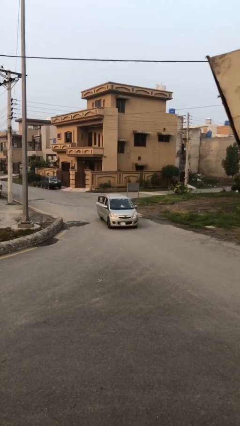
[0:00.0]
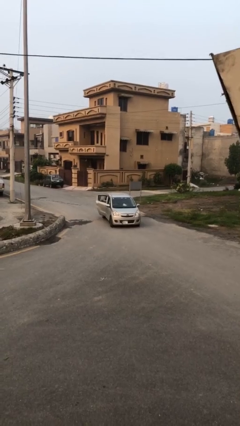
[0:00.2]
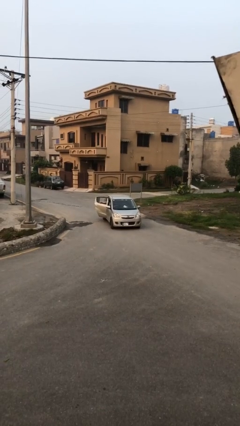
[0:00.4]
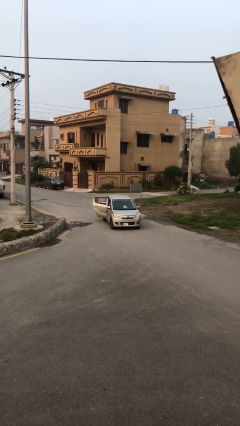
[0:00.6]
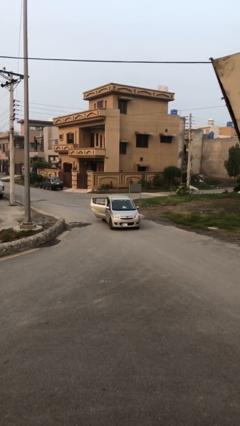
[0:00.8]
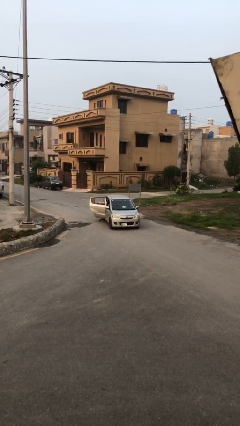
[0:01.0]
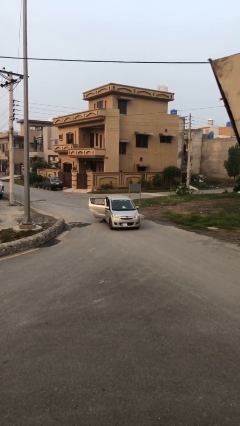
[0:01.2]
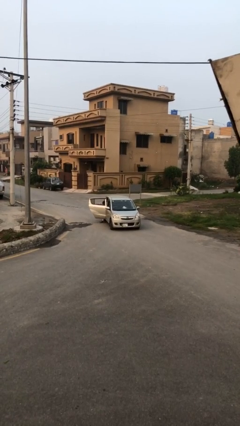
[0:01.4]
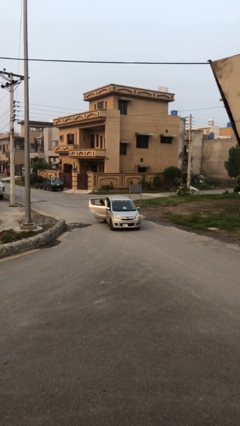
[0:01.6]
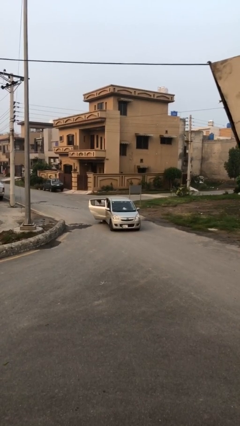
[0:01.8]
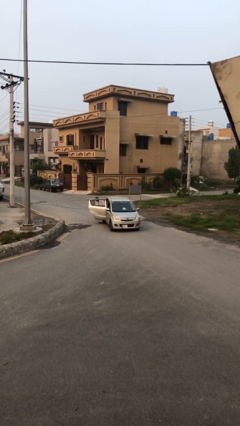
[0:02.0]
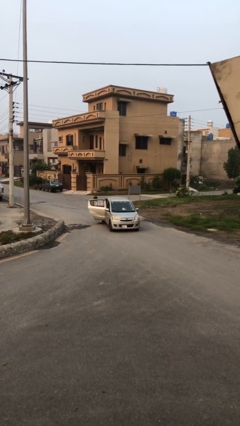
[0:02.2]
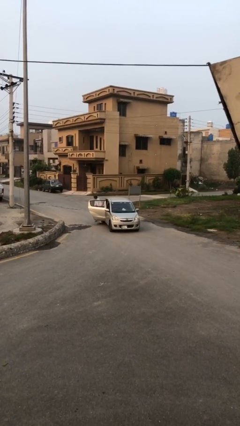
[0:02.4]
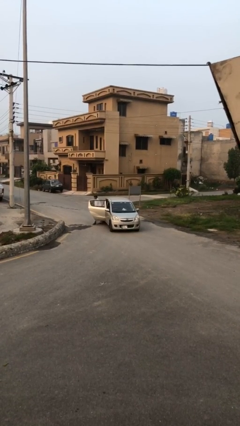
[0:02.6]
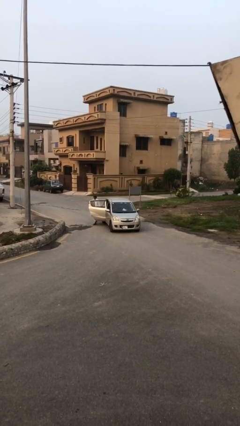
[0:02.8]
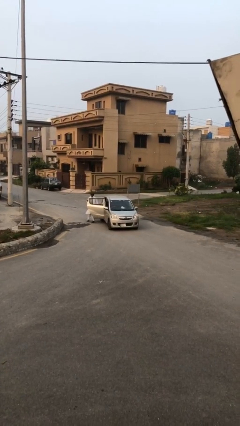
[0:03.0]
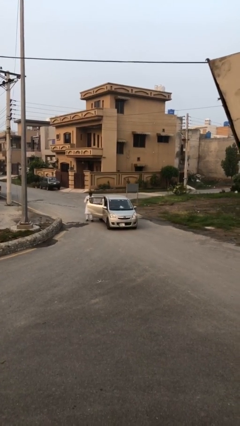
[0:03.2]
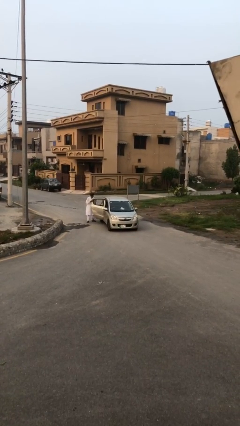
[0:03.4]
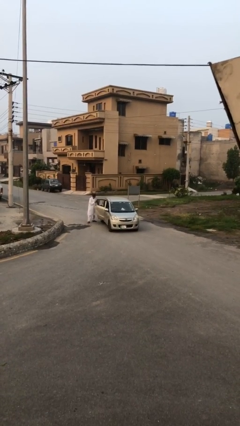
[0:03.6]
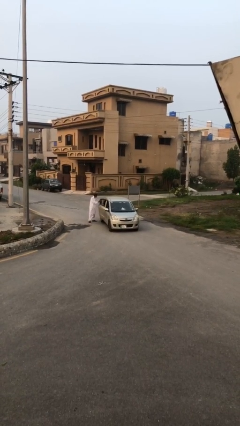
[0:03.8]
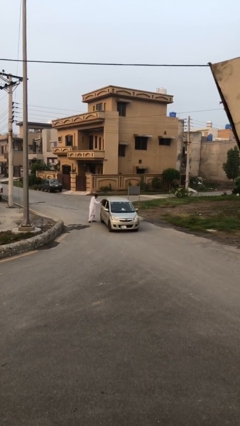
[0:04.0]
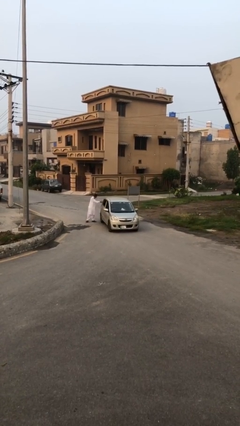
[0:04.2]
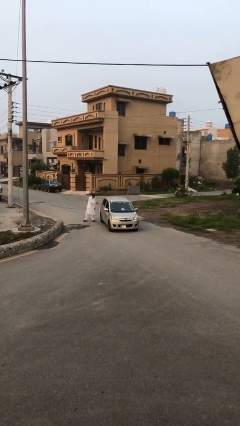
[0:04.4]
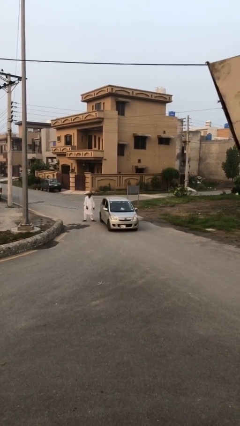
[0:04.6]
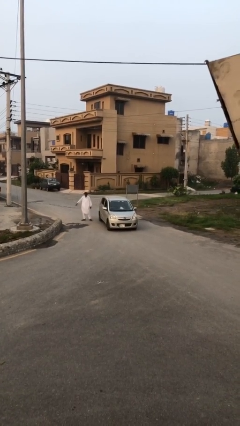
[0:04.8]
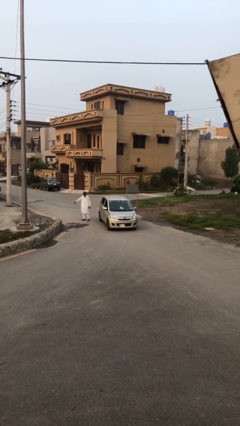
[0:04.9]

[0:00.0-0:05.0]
car drops off person

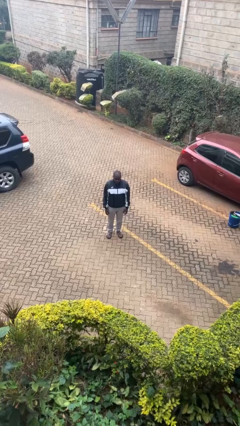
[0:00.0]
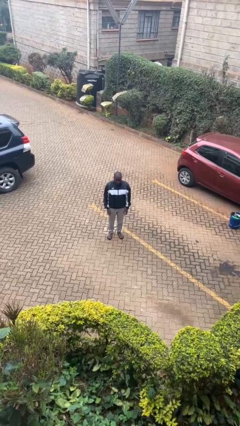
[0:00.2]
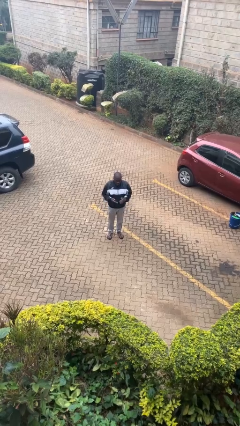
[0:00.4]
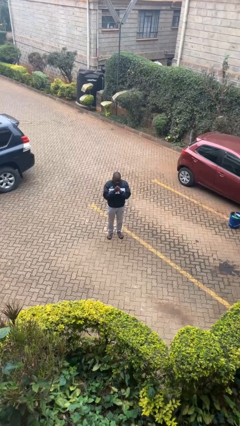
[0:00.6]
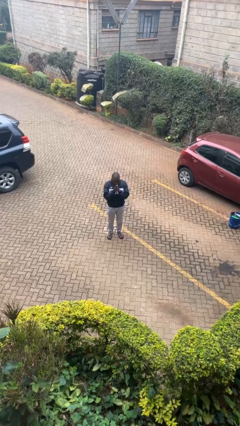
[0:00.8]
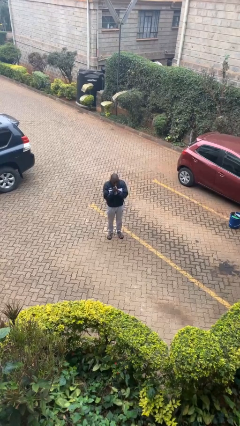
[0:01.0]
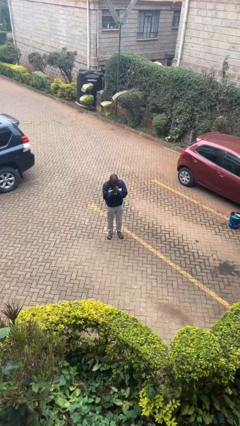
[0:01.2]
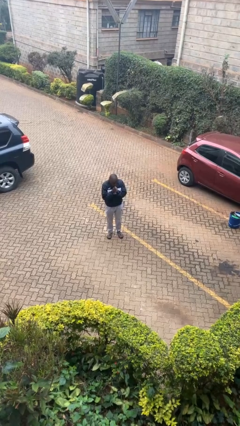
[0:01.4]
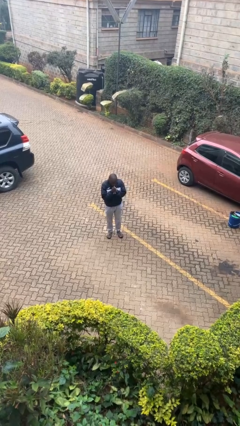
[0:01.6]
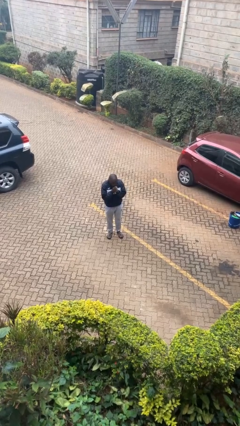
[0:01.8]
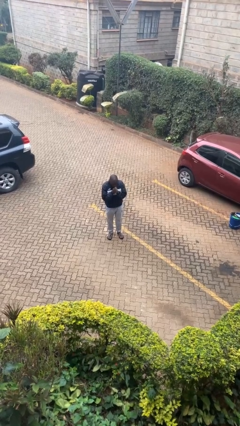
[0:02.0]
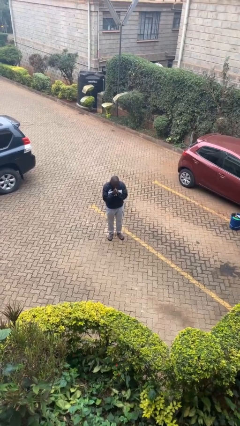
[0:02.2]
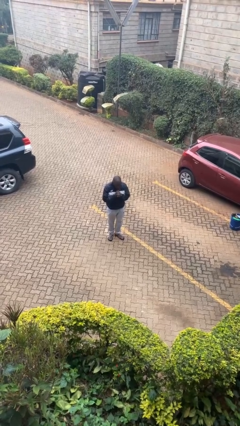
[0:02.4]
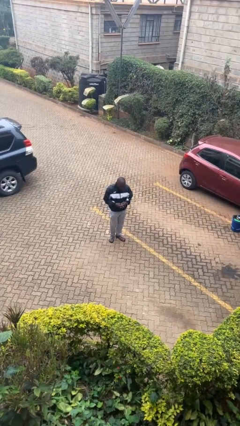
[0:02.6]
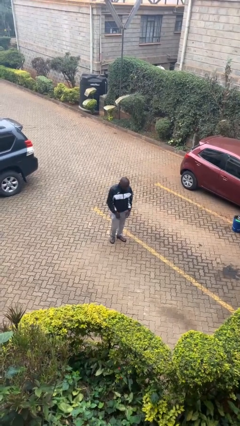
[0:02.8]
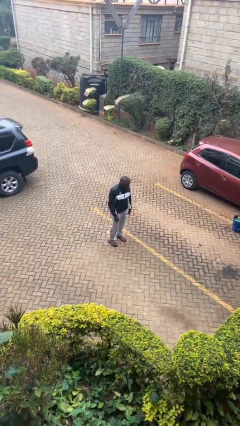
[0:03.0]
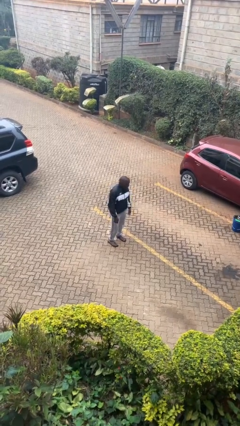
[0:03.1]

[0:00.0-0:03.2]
person blows into hands

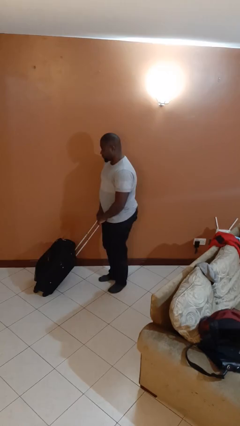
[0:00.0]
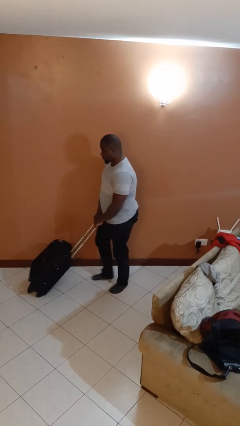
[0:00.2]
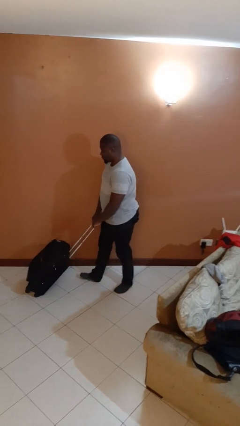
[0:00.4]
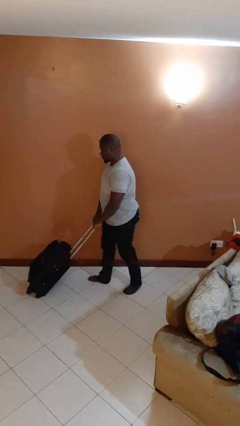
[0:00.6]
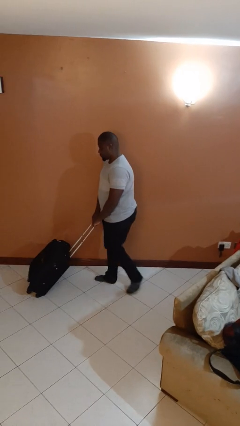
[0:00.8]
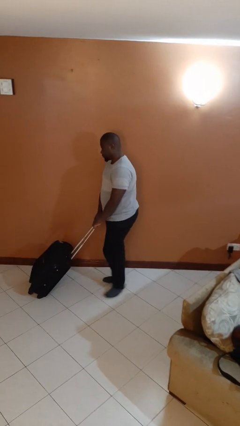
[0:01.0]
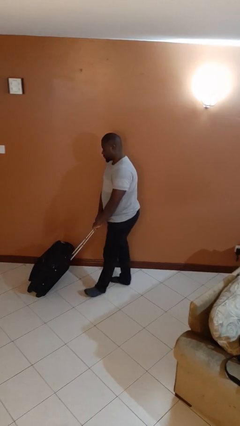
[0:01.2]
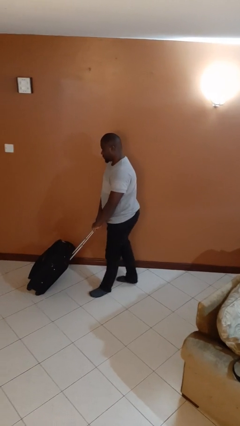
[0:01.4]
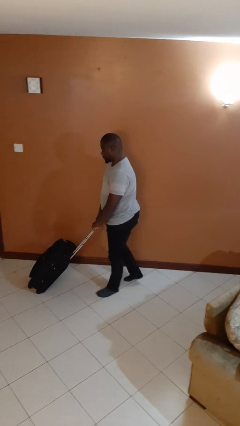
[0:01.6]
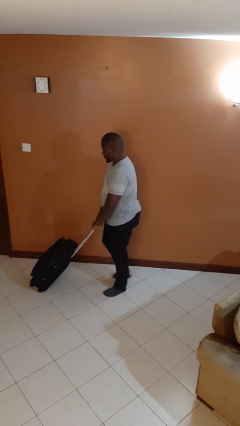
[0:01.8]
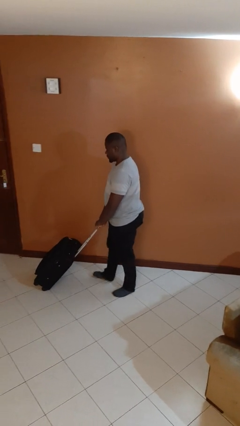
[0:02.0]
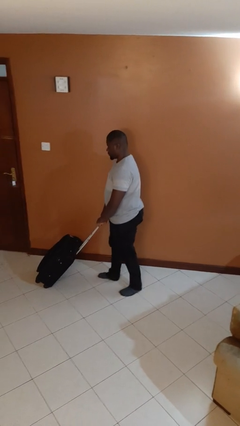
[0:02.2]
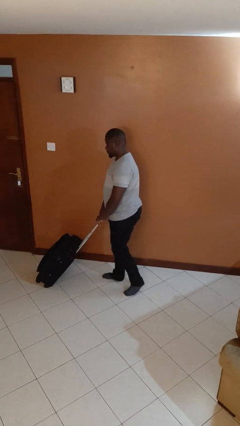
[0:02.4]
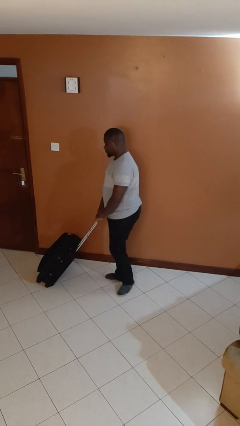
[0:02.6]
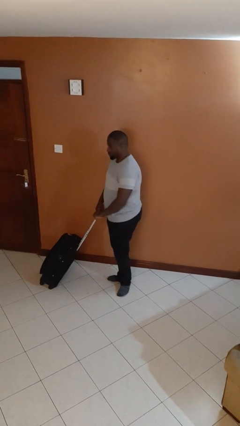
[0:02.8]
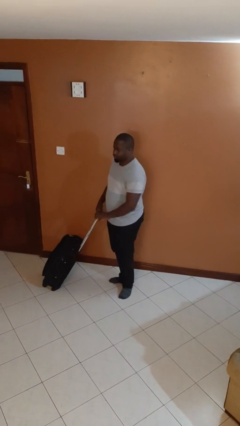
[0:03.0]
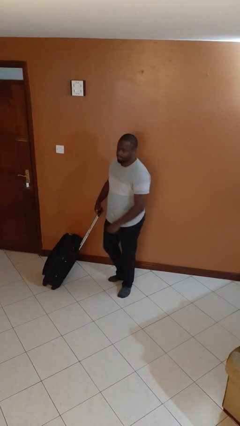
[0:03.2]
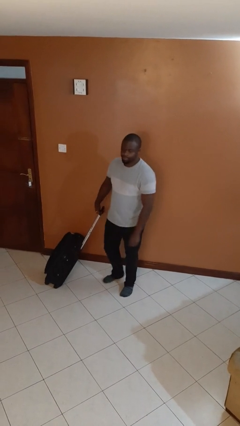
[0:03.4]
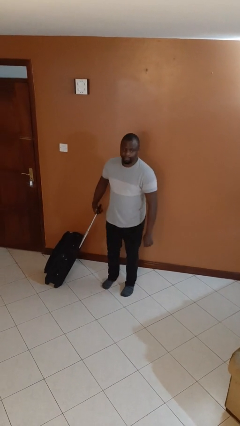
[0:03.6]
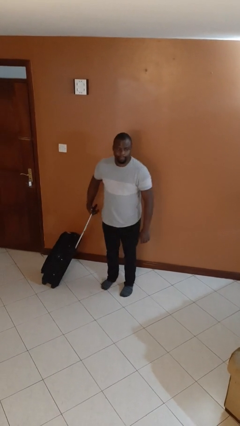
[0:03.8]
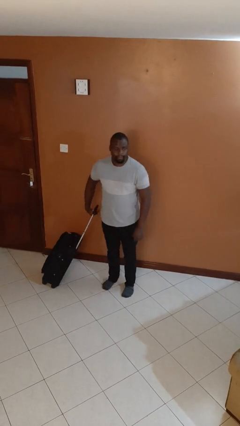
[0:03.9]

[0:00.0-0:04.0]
person pushes wheeled cart

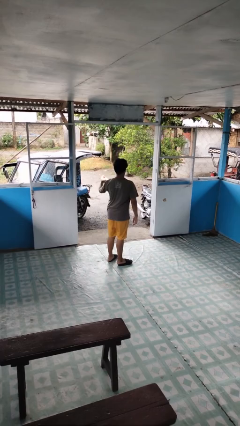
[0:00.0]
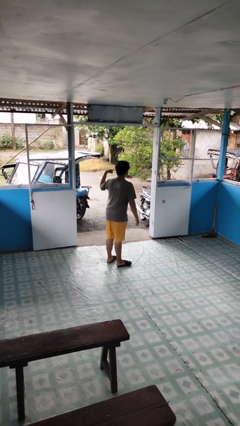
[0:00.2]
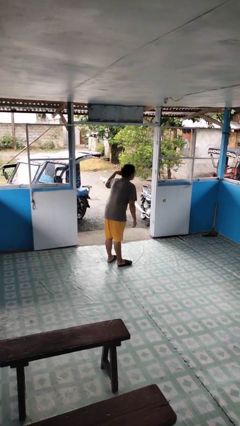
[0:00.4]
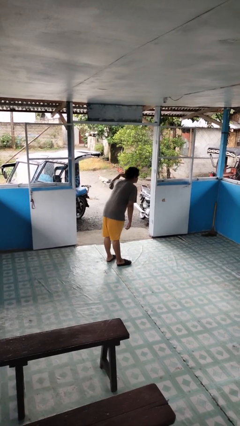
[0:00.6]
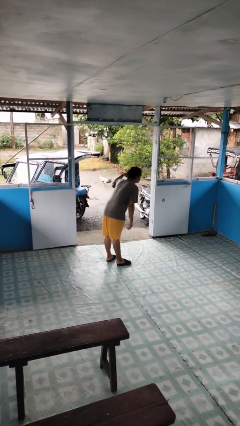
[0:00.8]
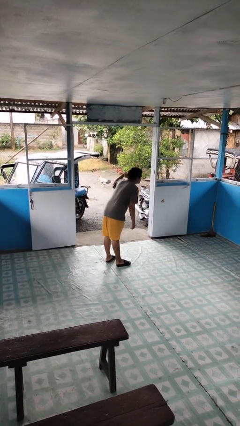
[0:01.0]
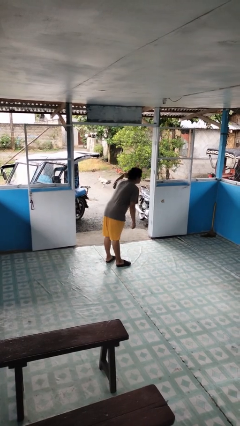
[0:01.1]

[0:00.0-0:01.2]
person gestures listen closely

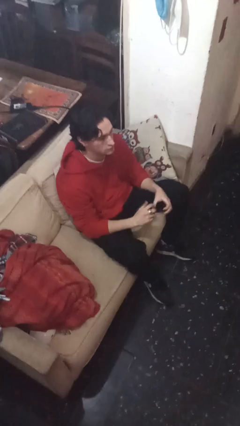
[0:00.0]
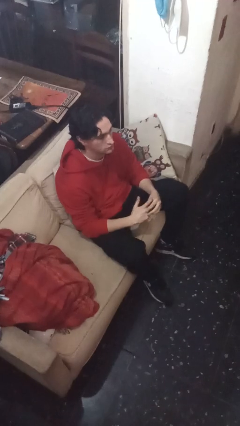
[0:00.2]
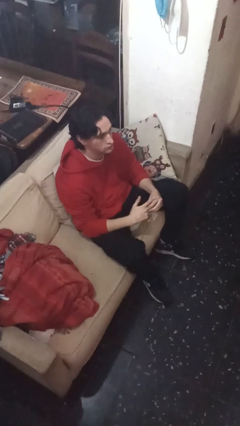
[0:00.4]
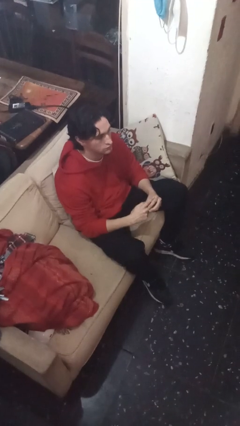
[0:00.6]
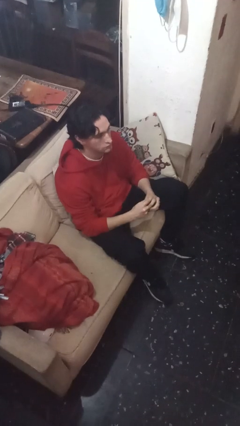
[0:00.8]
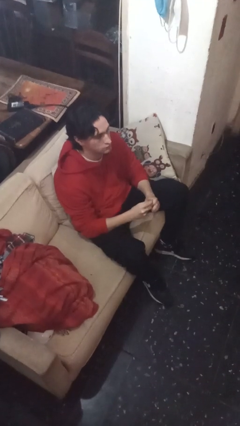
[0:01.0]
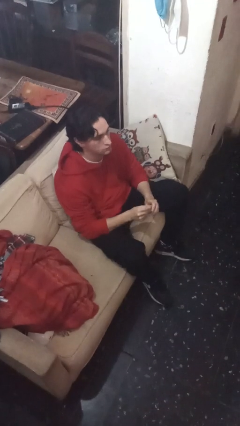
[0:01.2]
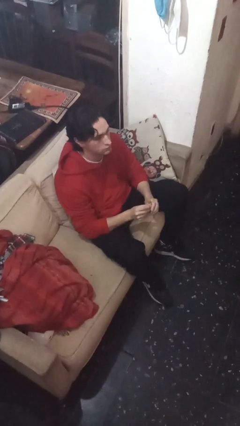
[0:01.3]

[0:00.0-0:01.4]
person takes off ring

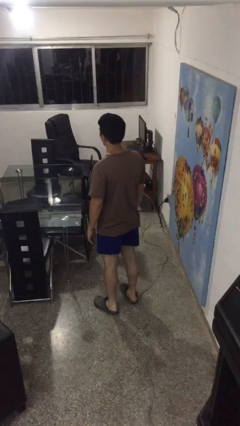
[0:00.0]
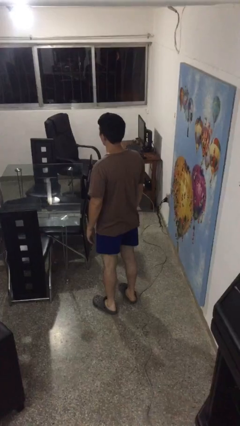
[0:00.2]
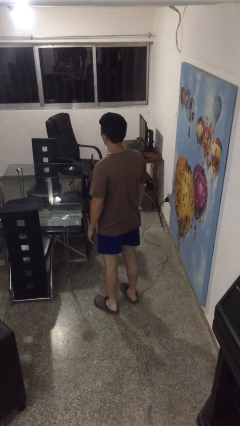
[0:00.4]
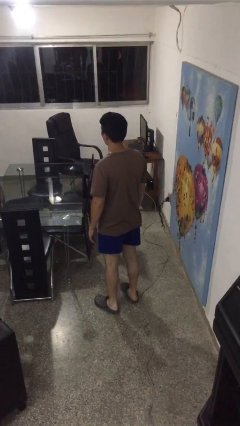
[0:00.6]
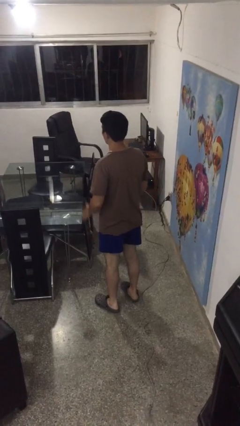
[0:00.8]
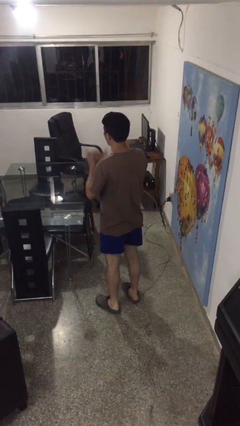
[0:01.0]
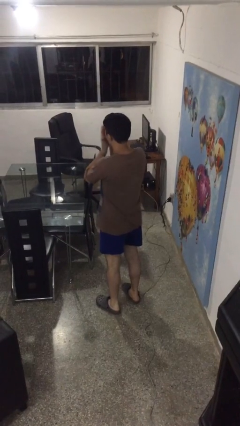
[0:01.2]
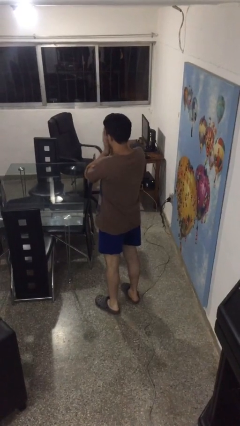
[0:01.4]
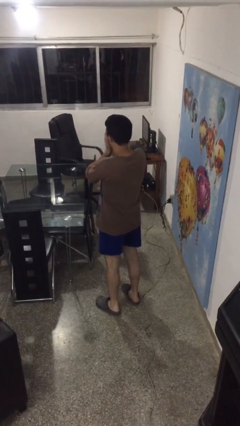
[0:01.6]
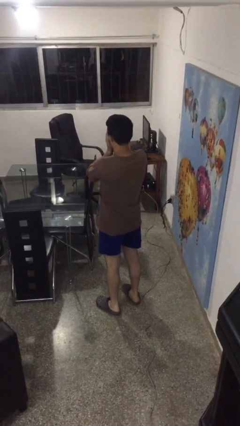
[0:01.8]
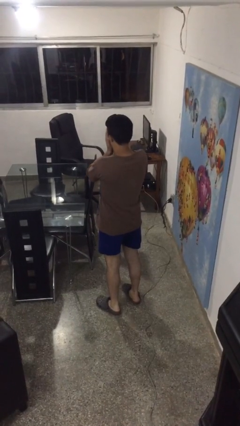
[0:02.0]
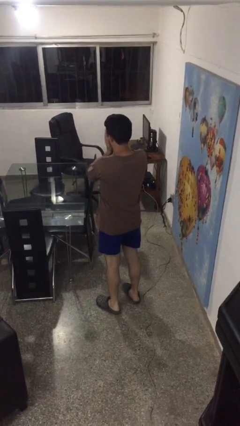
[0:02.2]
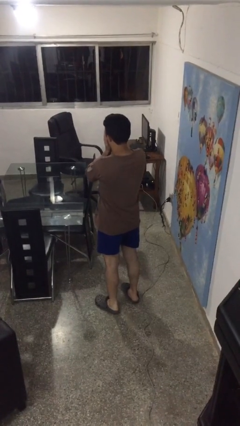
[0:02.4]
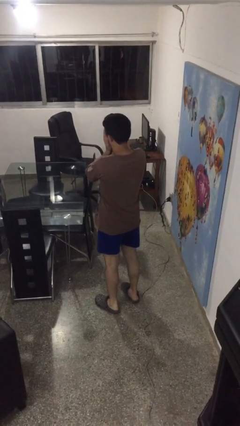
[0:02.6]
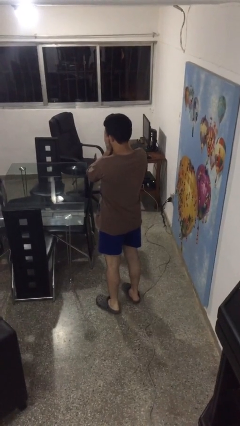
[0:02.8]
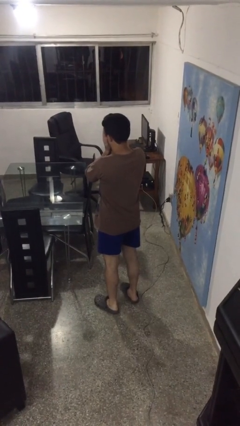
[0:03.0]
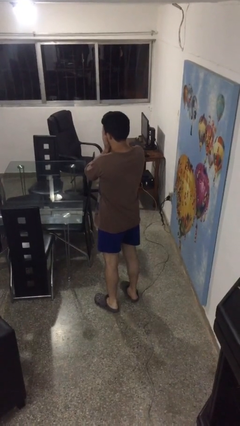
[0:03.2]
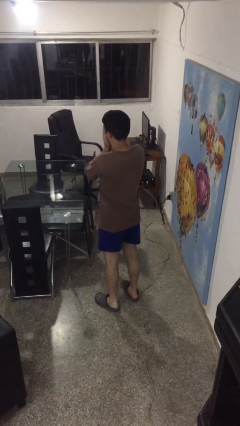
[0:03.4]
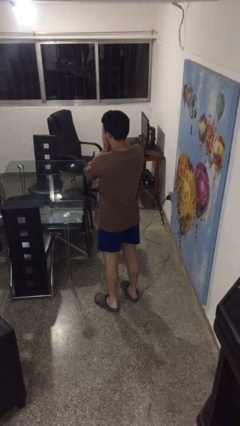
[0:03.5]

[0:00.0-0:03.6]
person covers face with hands
